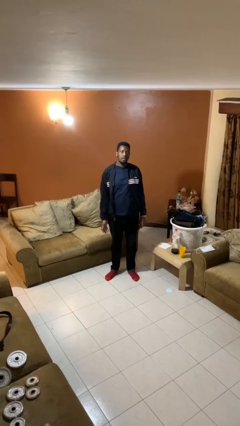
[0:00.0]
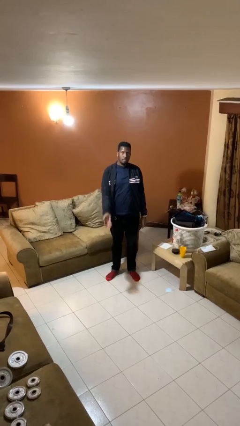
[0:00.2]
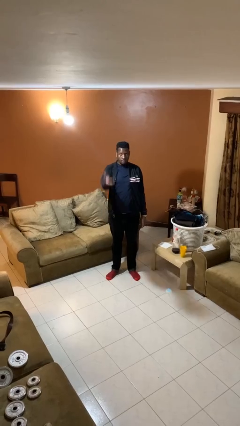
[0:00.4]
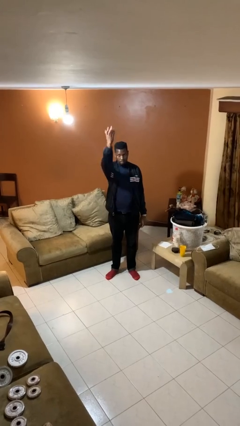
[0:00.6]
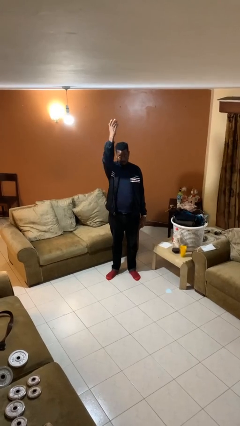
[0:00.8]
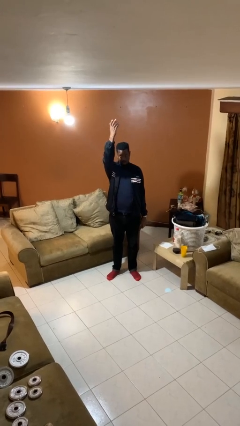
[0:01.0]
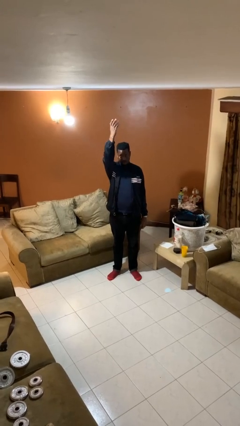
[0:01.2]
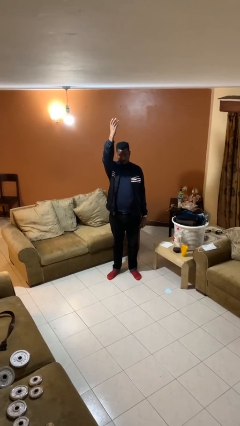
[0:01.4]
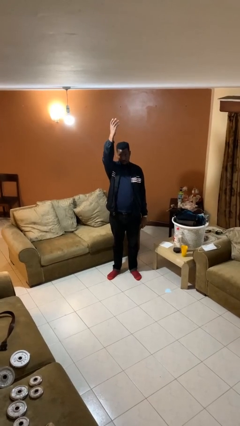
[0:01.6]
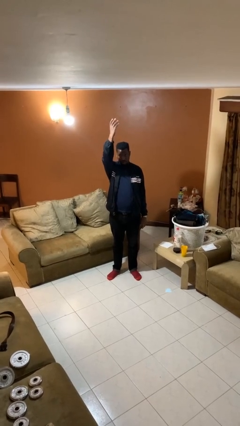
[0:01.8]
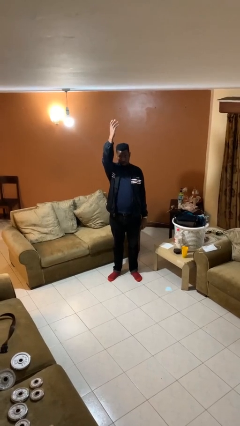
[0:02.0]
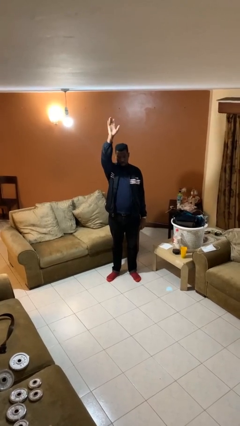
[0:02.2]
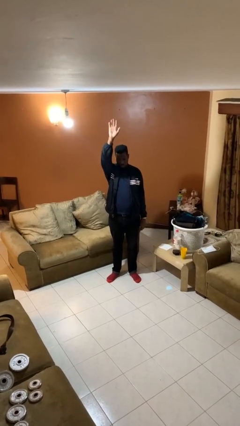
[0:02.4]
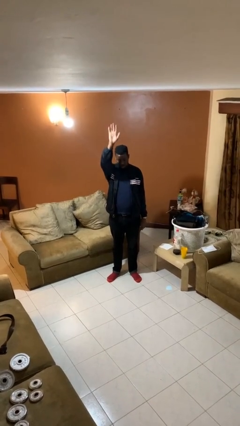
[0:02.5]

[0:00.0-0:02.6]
person gestures swipe up

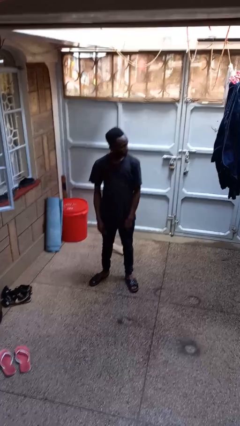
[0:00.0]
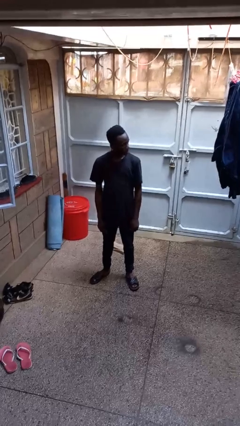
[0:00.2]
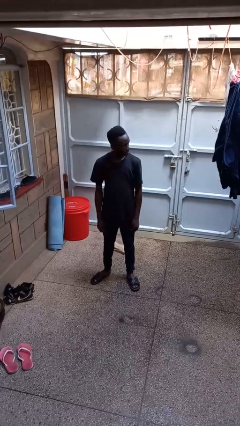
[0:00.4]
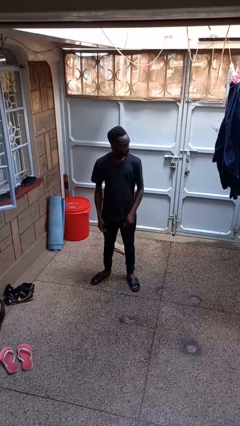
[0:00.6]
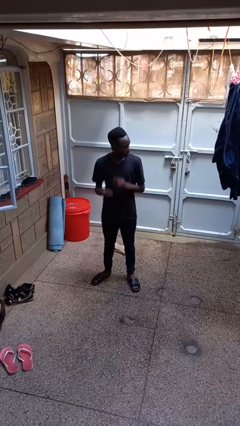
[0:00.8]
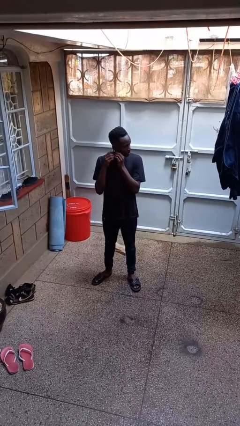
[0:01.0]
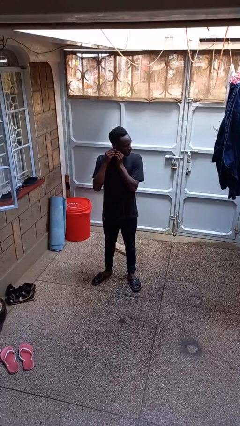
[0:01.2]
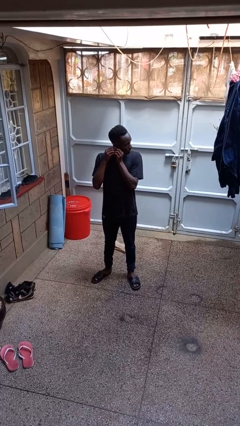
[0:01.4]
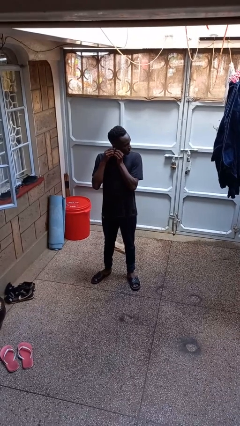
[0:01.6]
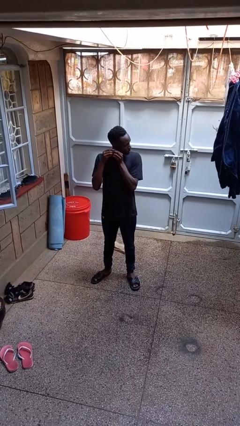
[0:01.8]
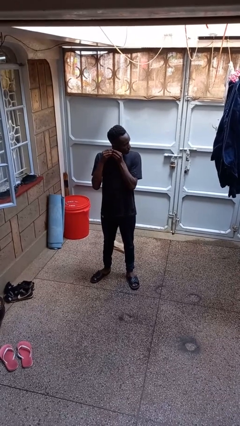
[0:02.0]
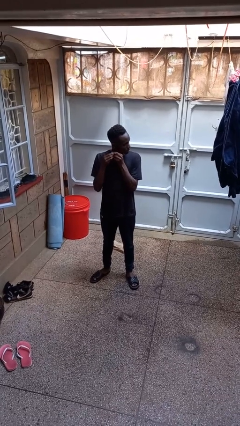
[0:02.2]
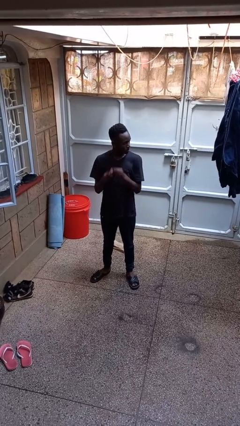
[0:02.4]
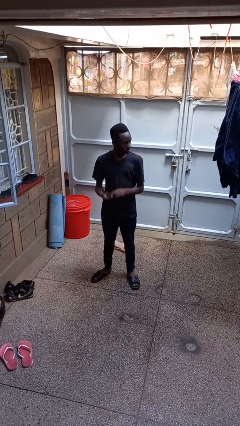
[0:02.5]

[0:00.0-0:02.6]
person takes off earrings

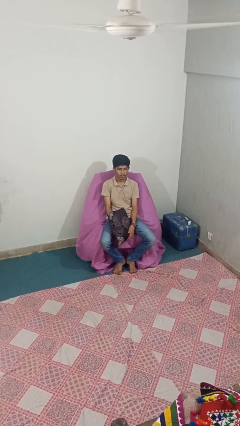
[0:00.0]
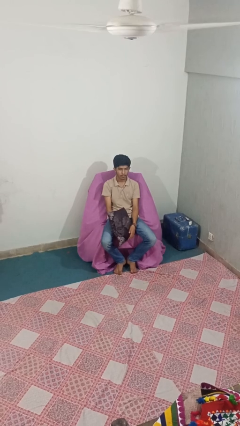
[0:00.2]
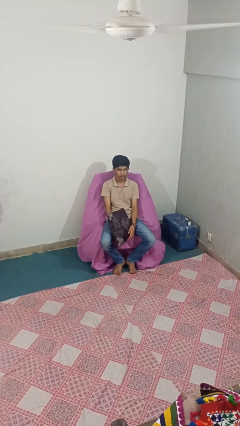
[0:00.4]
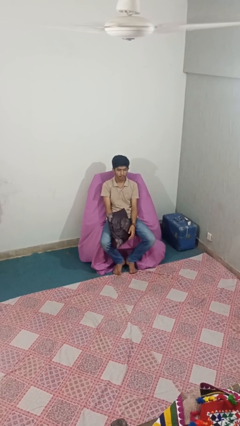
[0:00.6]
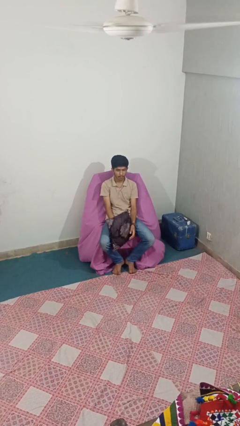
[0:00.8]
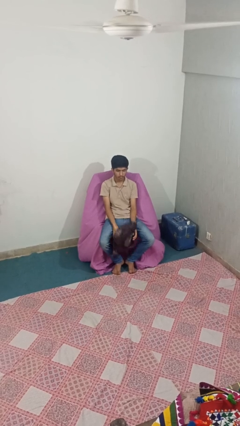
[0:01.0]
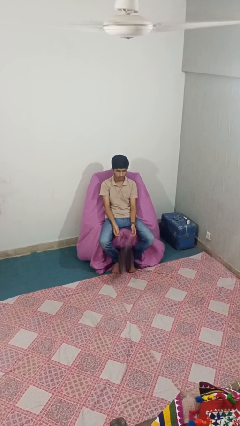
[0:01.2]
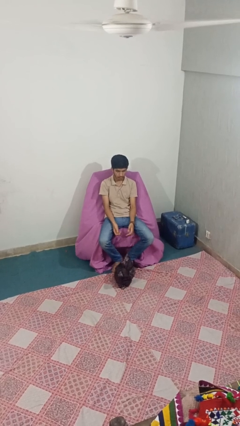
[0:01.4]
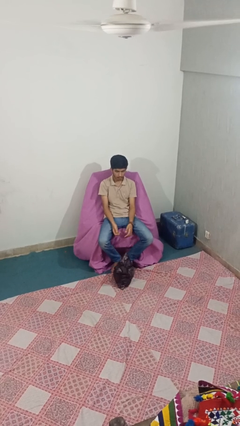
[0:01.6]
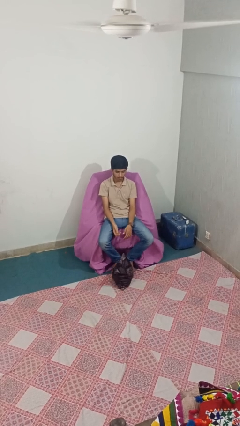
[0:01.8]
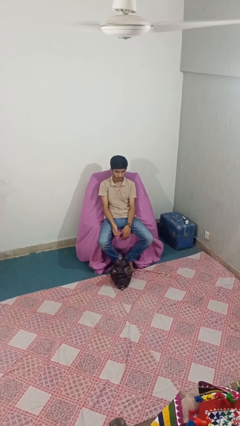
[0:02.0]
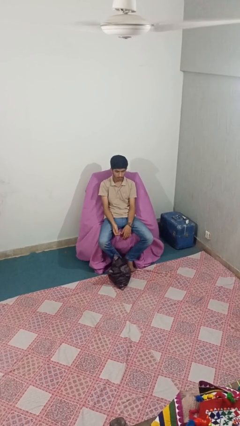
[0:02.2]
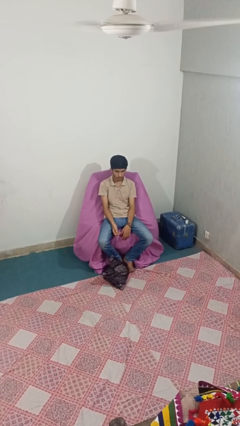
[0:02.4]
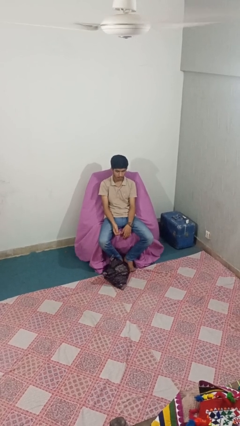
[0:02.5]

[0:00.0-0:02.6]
person drops object

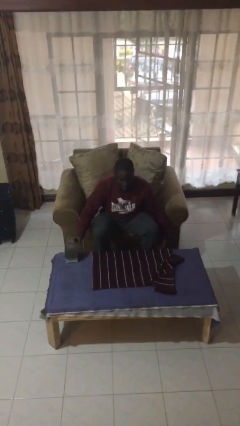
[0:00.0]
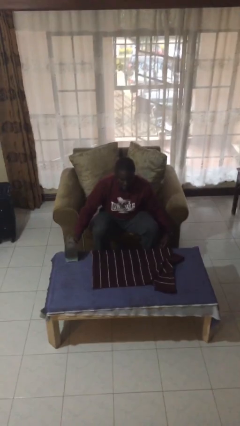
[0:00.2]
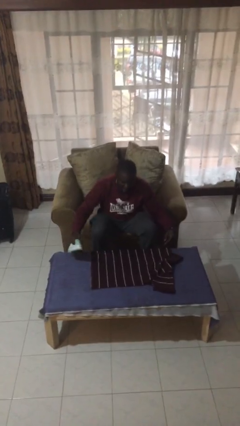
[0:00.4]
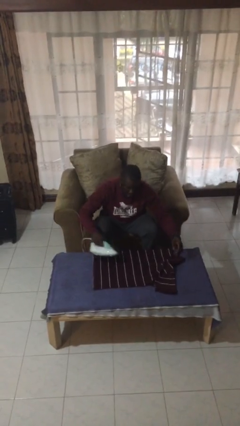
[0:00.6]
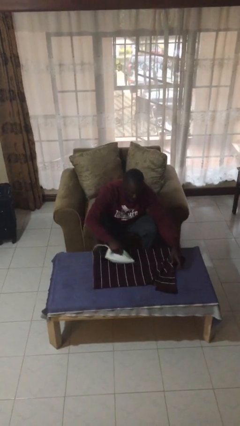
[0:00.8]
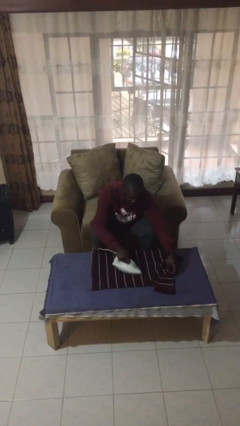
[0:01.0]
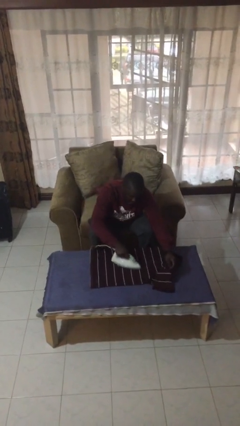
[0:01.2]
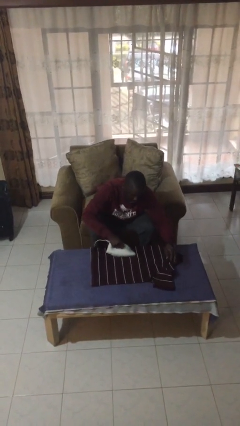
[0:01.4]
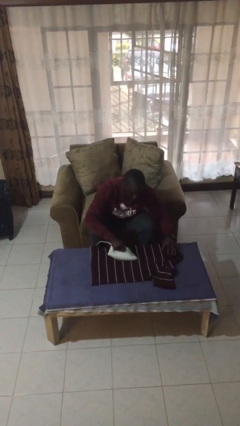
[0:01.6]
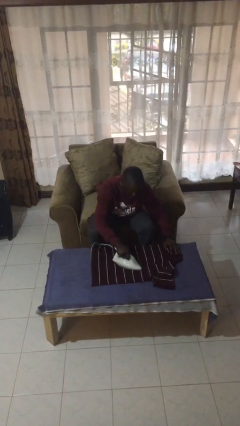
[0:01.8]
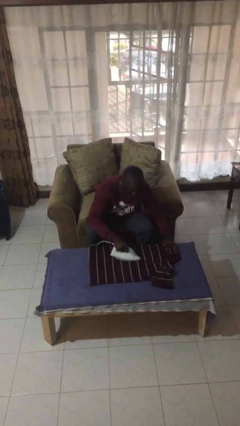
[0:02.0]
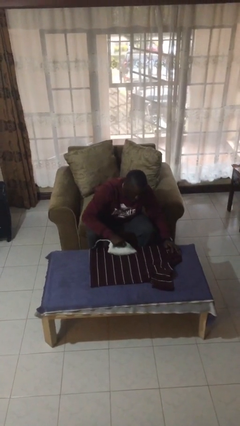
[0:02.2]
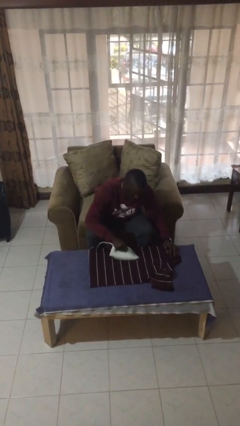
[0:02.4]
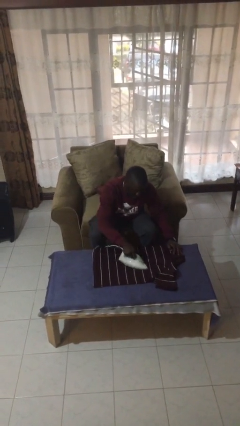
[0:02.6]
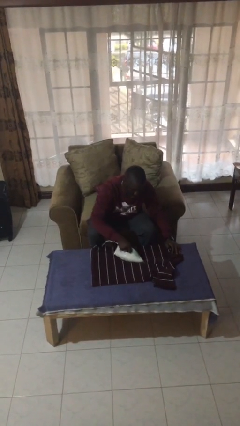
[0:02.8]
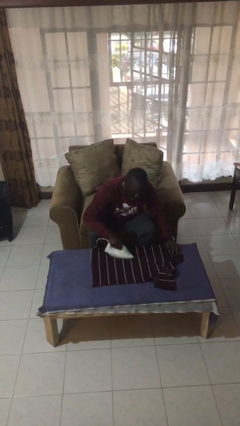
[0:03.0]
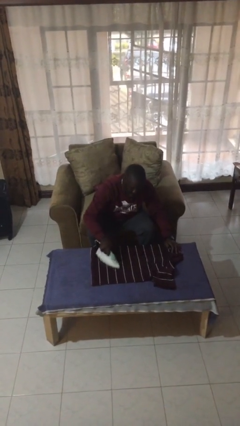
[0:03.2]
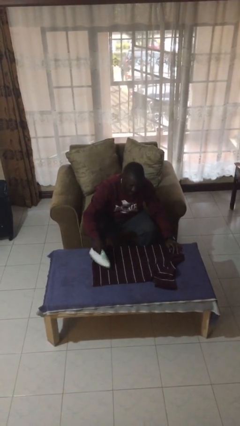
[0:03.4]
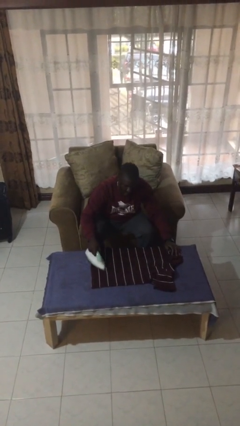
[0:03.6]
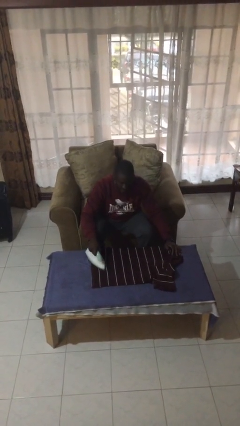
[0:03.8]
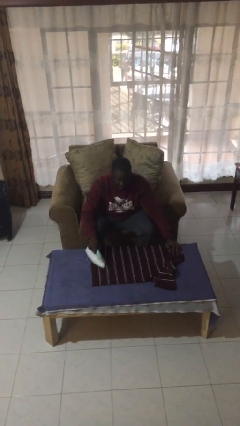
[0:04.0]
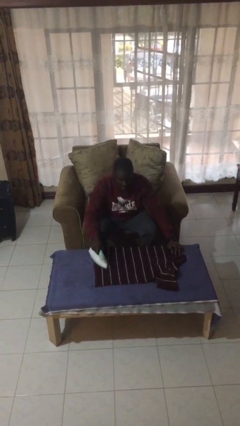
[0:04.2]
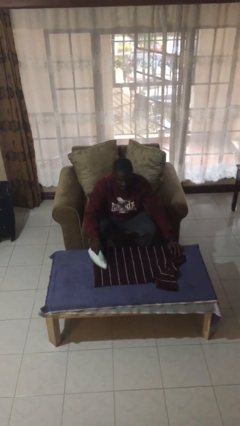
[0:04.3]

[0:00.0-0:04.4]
person irons clothes

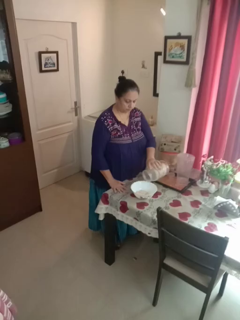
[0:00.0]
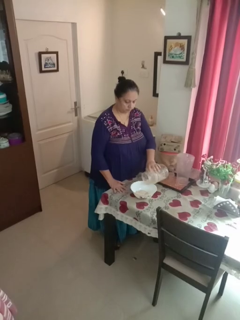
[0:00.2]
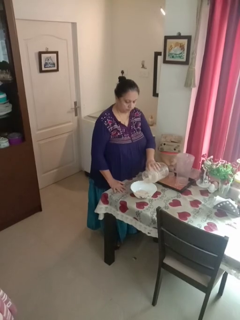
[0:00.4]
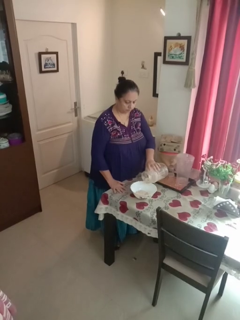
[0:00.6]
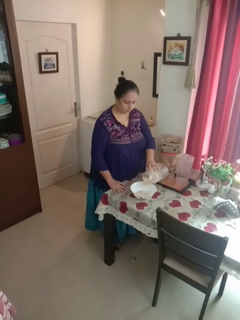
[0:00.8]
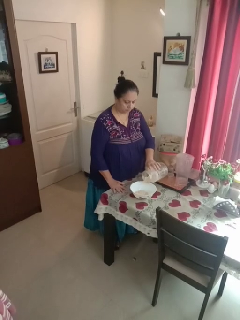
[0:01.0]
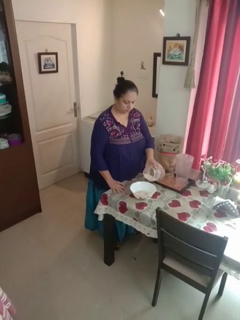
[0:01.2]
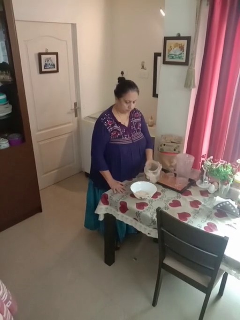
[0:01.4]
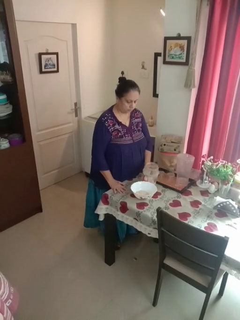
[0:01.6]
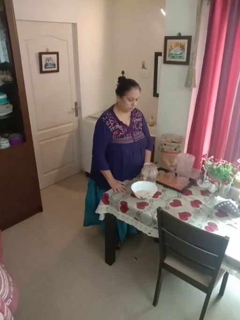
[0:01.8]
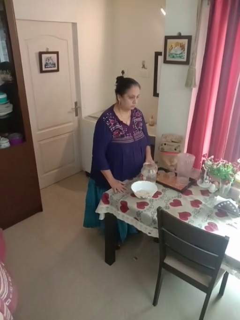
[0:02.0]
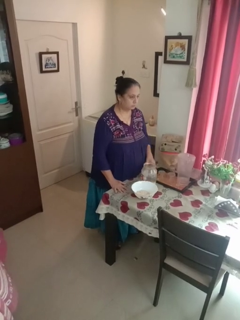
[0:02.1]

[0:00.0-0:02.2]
person pours into bowl

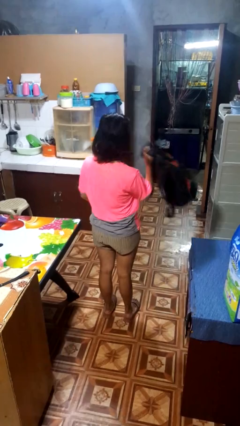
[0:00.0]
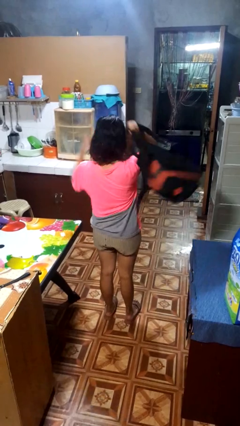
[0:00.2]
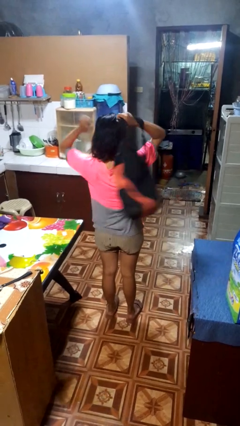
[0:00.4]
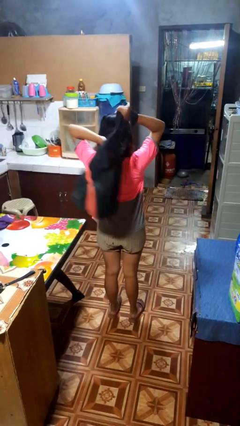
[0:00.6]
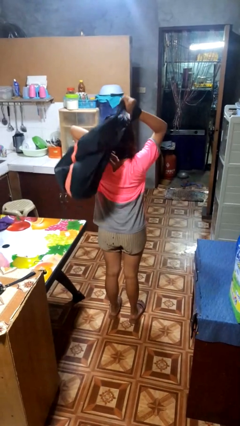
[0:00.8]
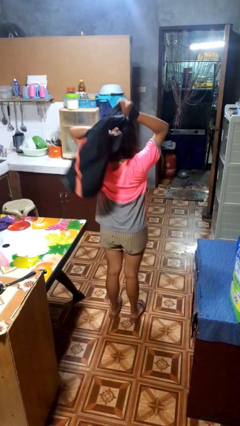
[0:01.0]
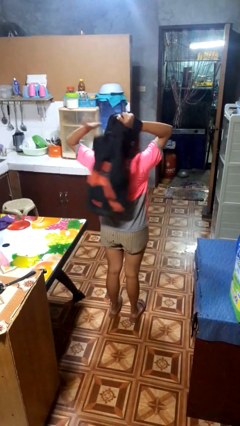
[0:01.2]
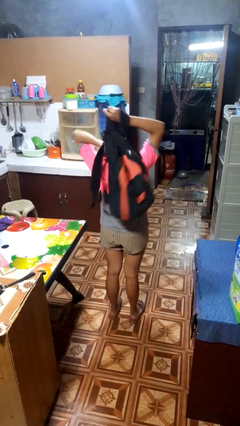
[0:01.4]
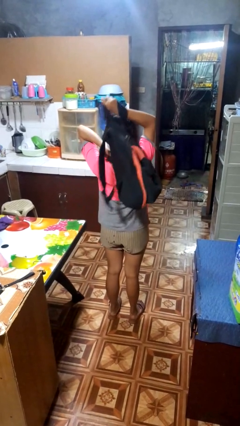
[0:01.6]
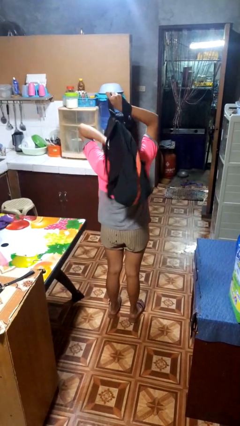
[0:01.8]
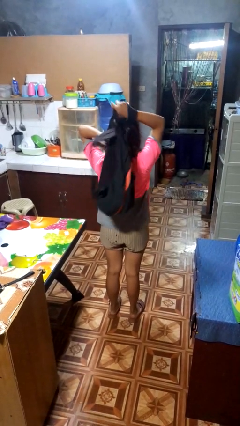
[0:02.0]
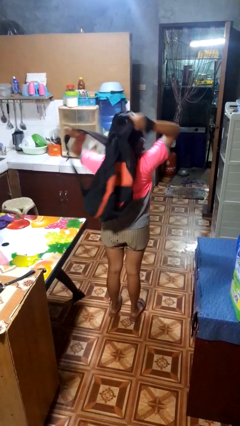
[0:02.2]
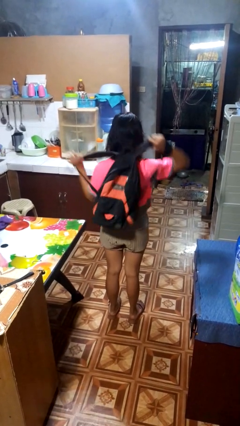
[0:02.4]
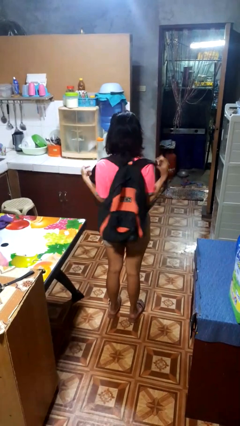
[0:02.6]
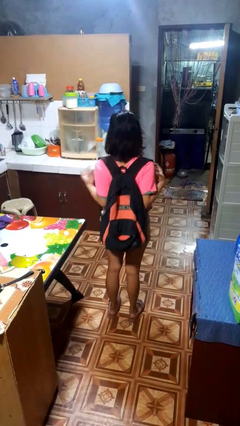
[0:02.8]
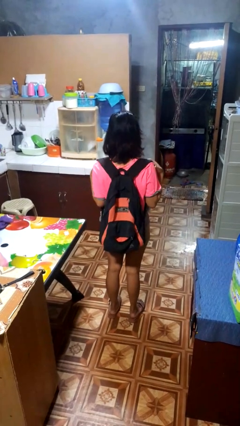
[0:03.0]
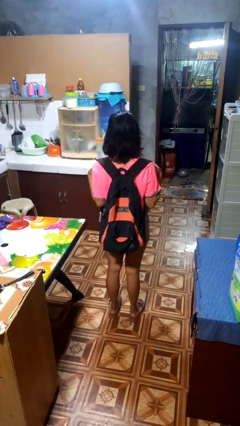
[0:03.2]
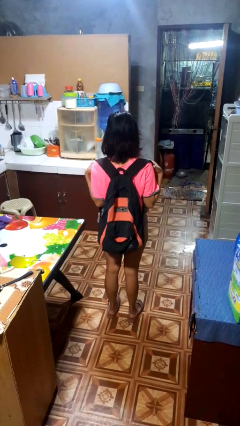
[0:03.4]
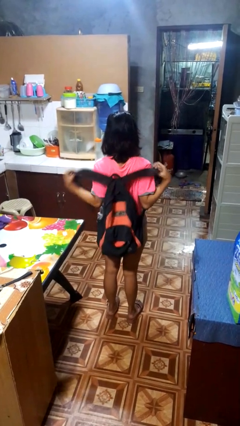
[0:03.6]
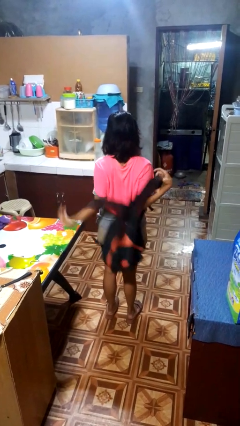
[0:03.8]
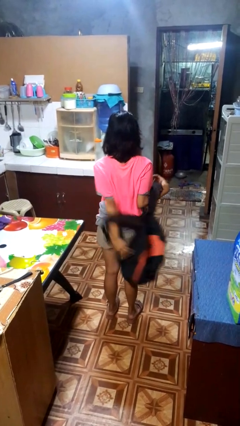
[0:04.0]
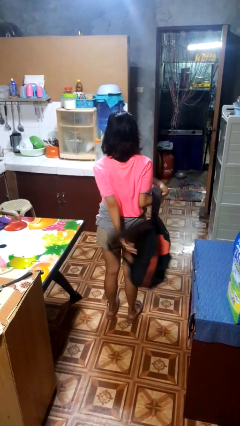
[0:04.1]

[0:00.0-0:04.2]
person puts on backpack
